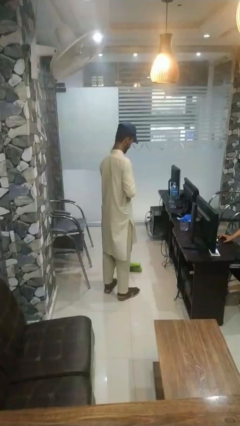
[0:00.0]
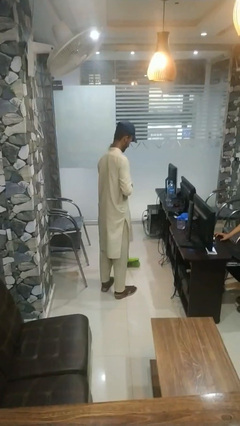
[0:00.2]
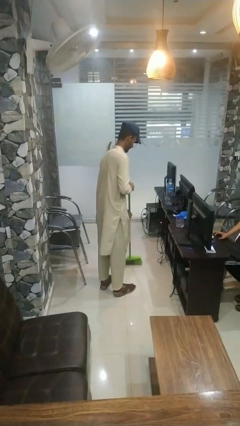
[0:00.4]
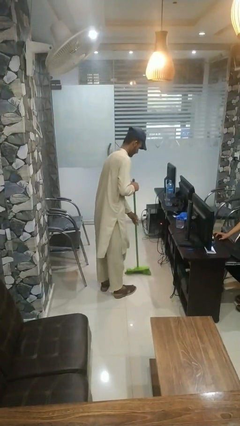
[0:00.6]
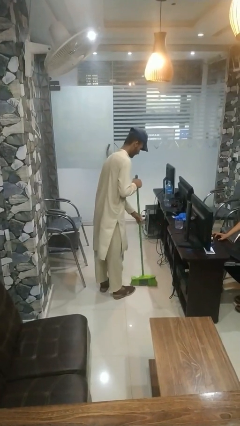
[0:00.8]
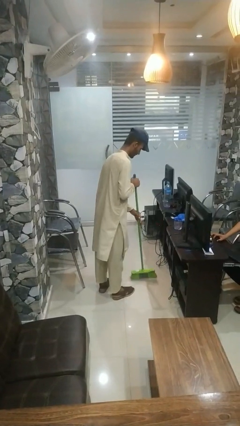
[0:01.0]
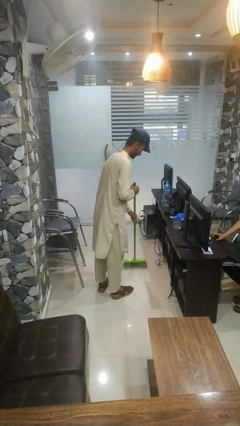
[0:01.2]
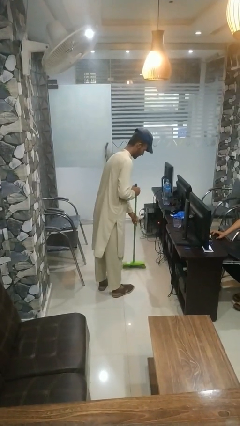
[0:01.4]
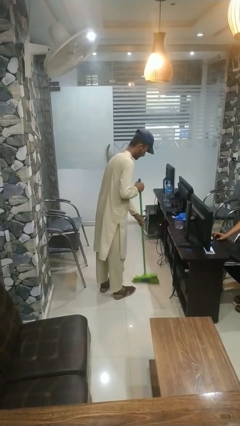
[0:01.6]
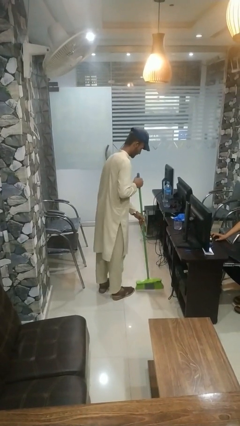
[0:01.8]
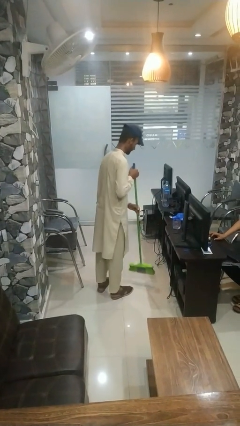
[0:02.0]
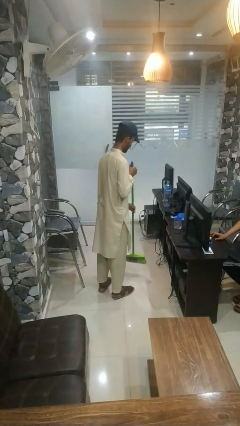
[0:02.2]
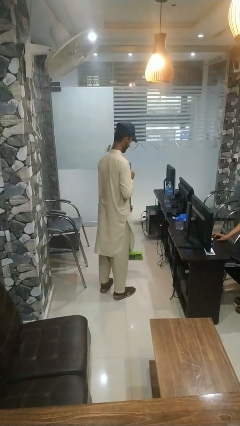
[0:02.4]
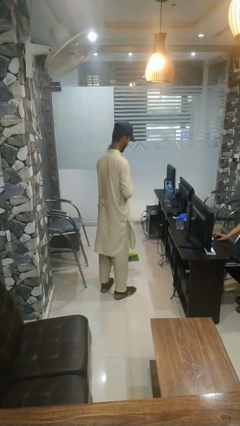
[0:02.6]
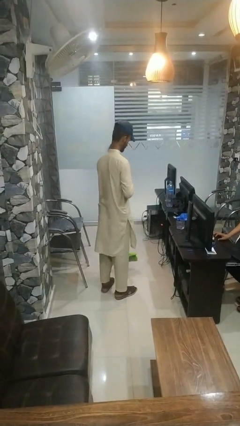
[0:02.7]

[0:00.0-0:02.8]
person sweeps floor

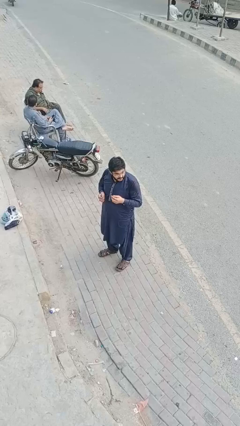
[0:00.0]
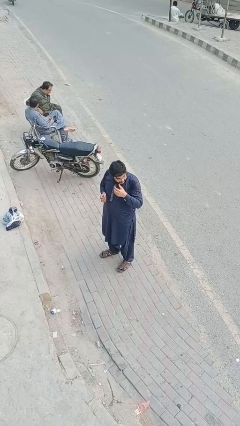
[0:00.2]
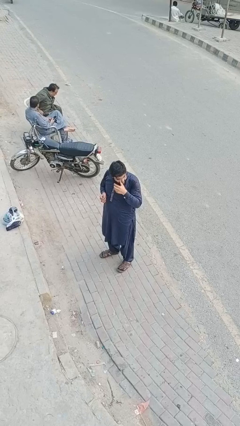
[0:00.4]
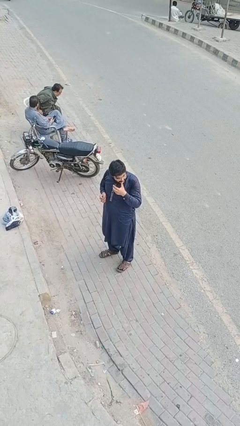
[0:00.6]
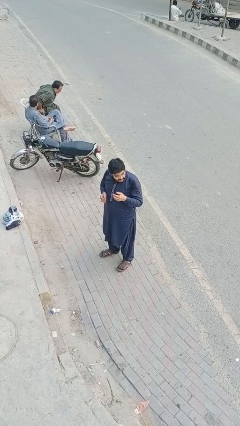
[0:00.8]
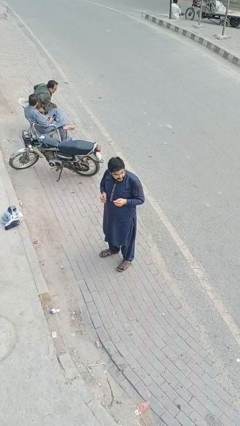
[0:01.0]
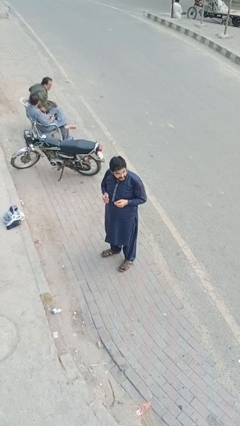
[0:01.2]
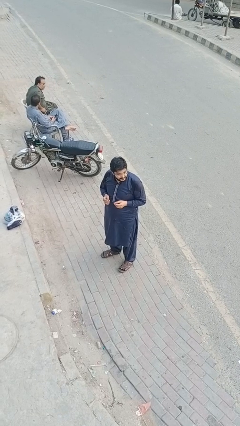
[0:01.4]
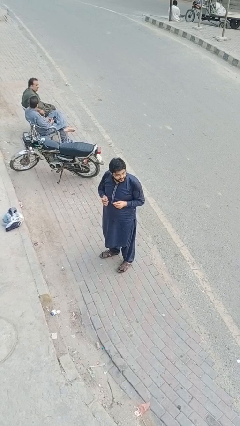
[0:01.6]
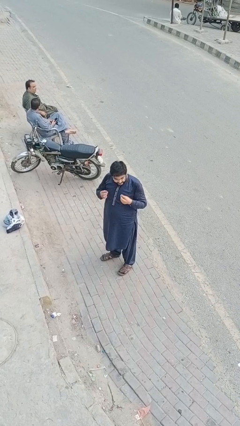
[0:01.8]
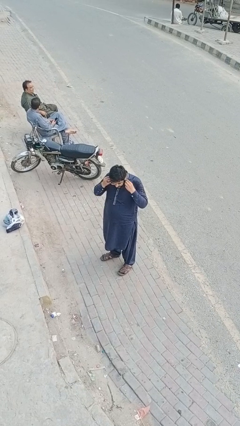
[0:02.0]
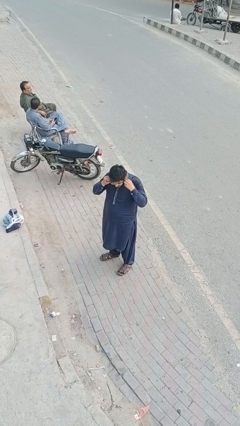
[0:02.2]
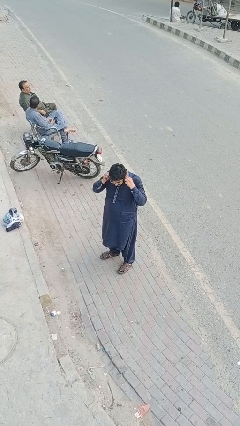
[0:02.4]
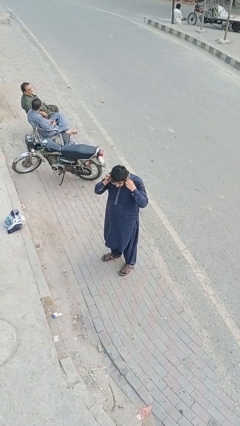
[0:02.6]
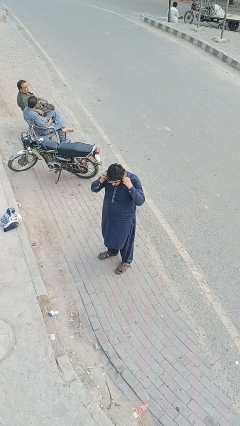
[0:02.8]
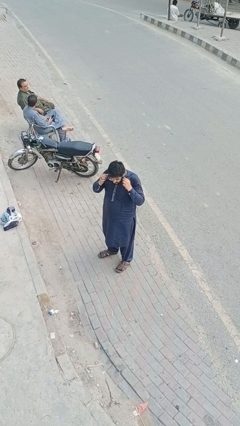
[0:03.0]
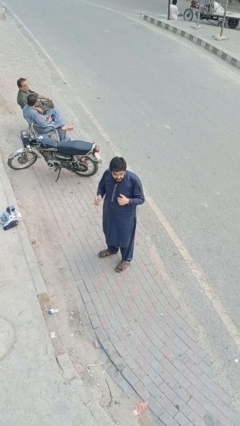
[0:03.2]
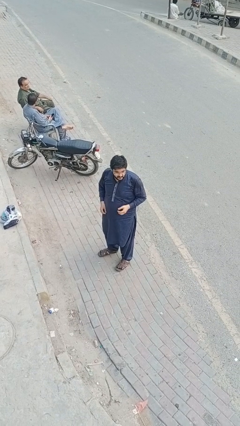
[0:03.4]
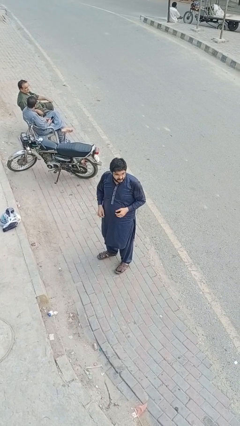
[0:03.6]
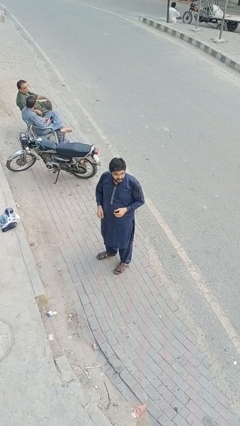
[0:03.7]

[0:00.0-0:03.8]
person puts on headphones

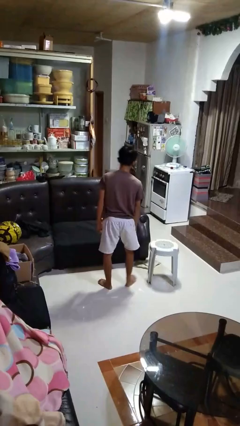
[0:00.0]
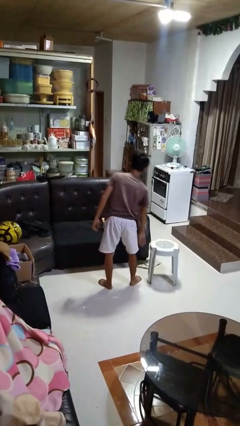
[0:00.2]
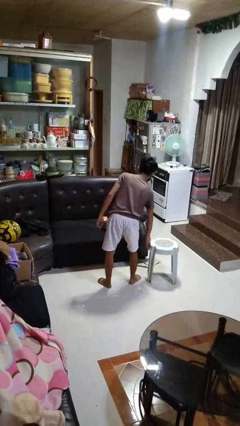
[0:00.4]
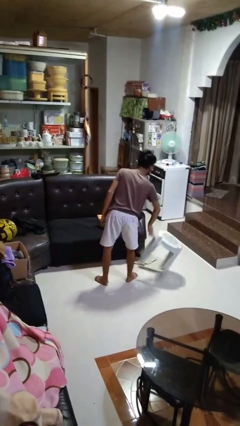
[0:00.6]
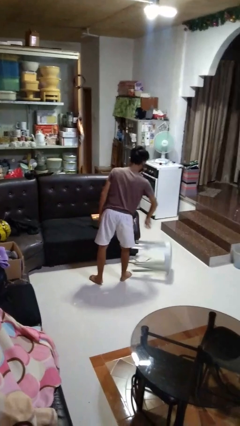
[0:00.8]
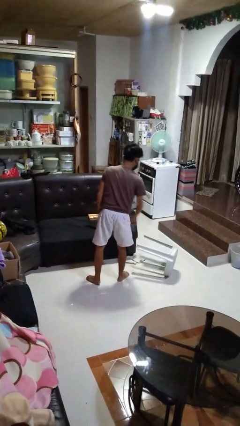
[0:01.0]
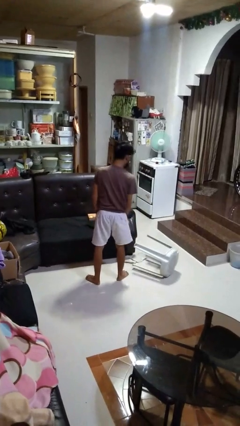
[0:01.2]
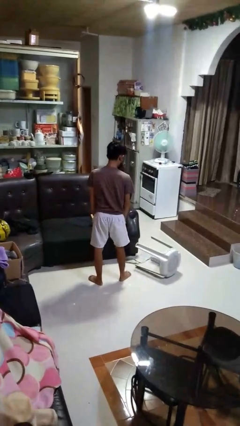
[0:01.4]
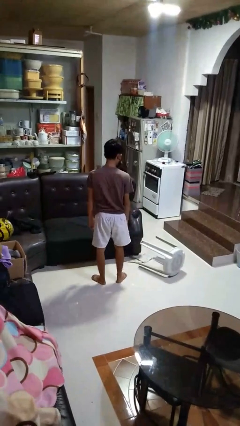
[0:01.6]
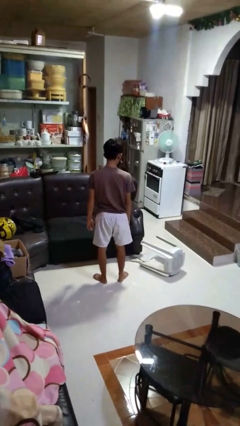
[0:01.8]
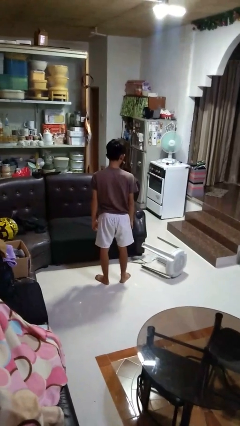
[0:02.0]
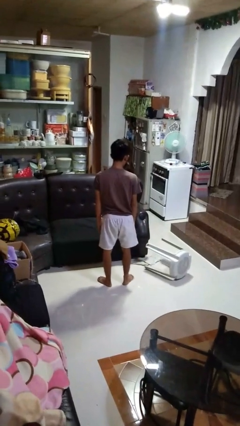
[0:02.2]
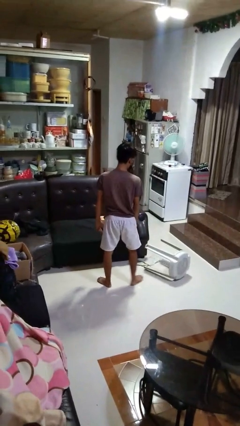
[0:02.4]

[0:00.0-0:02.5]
person knocks over furniture

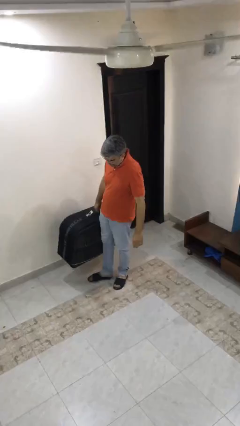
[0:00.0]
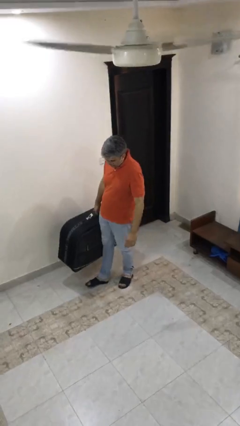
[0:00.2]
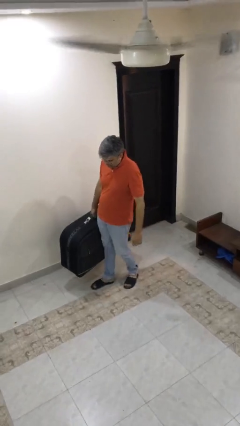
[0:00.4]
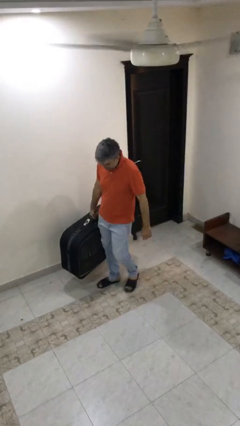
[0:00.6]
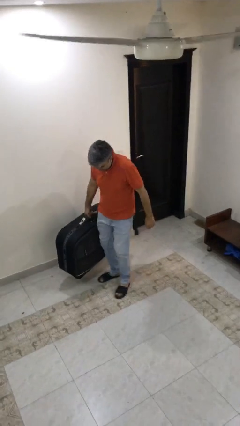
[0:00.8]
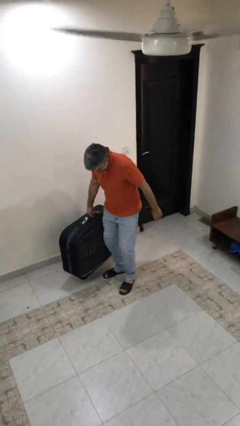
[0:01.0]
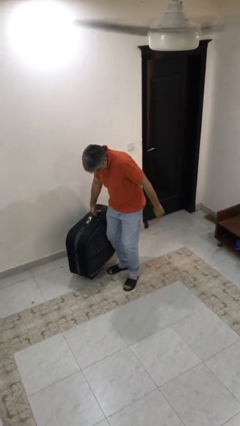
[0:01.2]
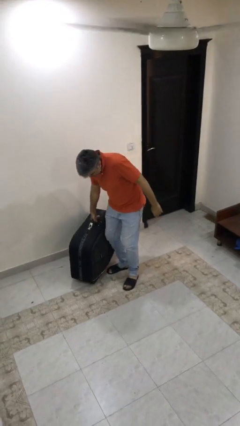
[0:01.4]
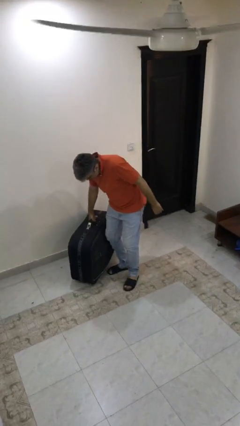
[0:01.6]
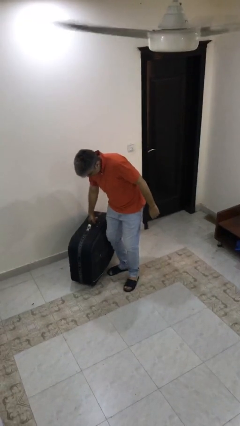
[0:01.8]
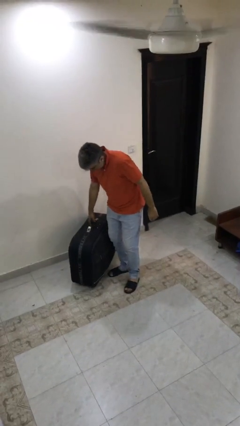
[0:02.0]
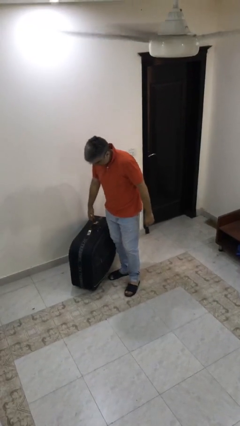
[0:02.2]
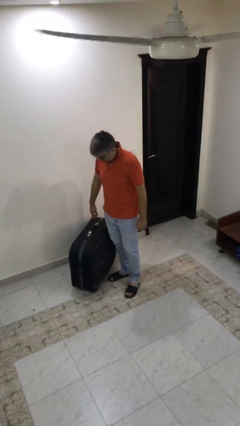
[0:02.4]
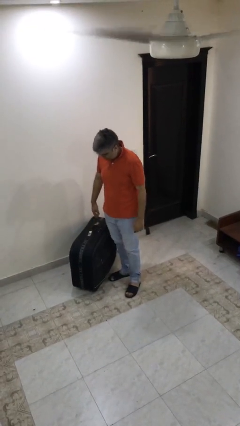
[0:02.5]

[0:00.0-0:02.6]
person puts down object on floor

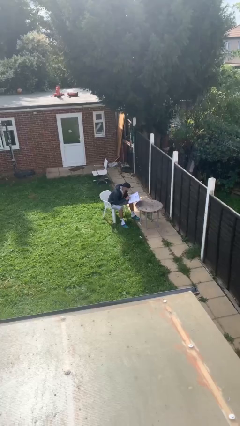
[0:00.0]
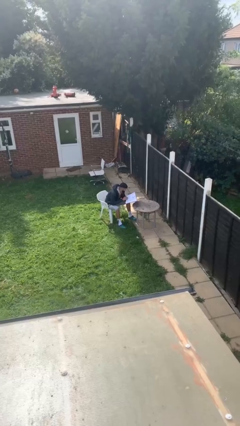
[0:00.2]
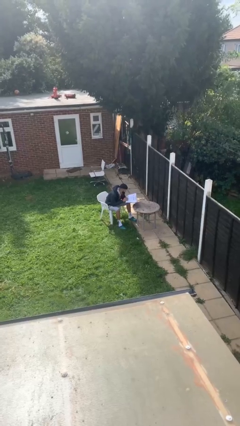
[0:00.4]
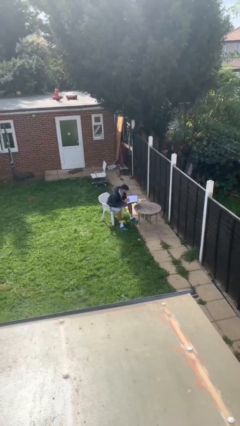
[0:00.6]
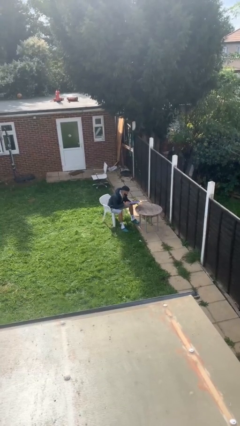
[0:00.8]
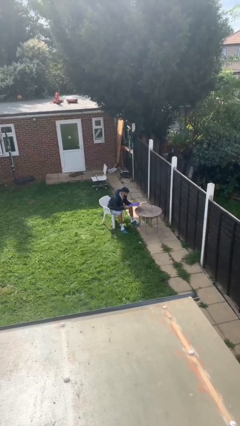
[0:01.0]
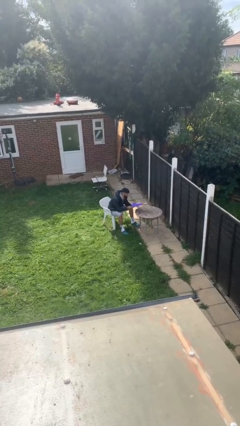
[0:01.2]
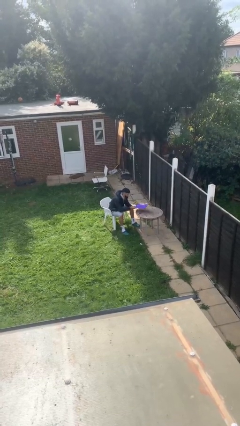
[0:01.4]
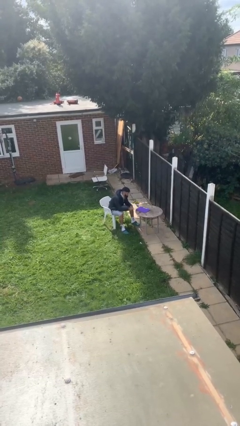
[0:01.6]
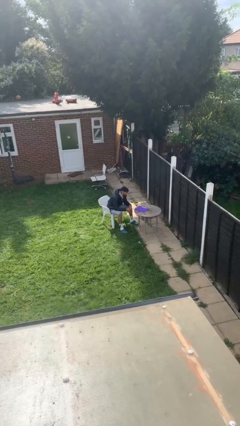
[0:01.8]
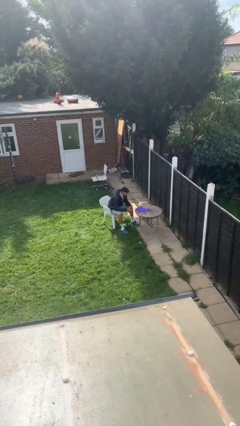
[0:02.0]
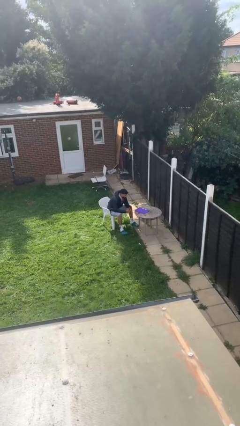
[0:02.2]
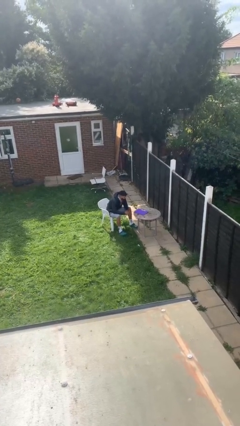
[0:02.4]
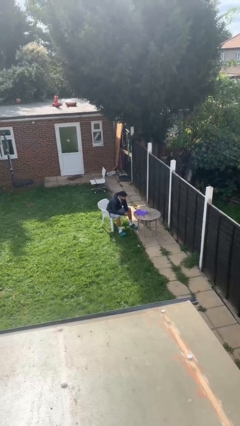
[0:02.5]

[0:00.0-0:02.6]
person puts down object on table

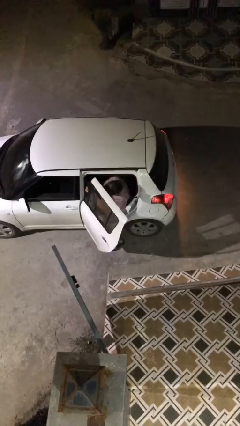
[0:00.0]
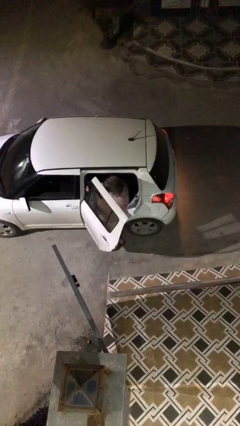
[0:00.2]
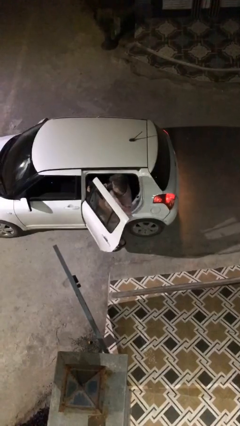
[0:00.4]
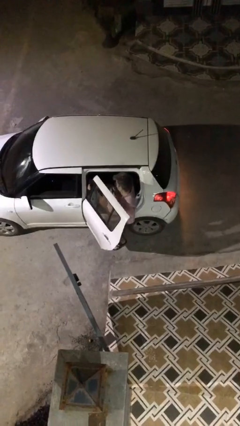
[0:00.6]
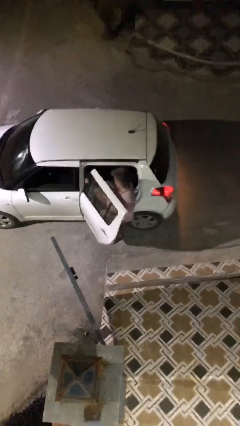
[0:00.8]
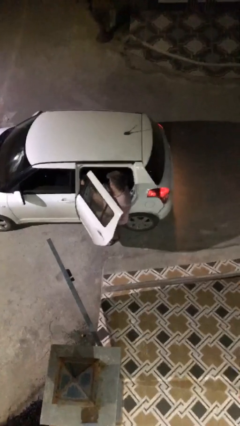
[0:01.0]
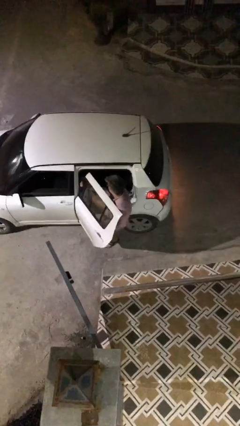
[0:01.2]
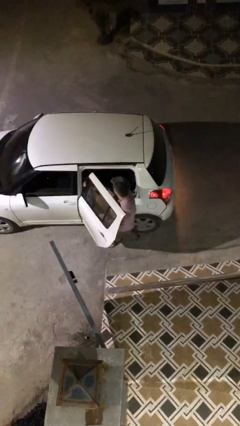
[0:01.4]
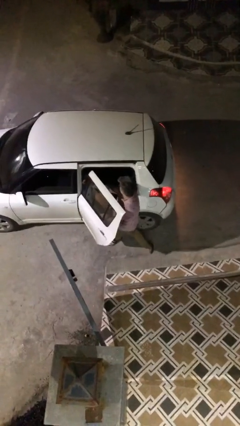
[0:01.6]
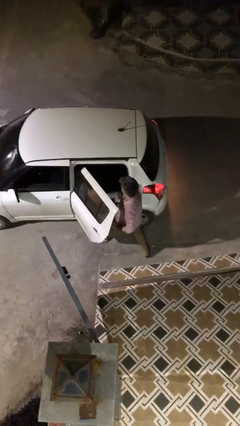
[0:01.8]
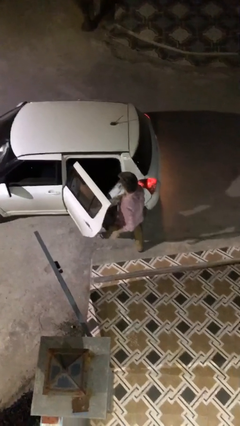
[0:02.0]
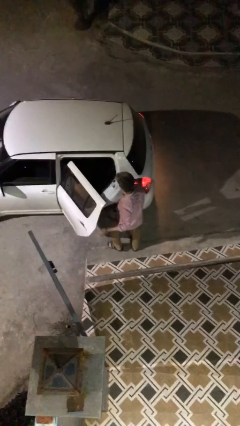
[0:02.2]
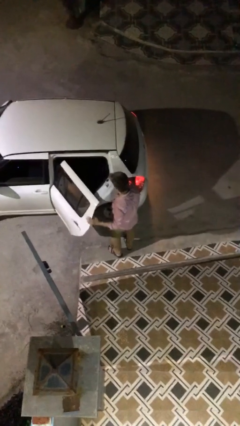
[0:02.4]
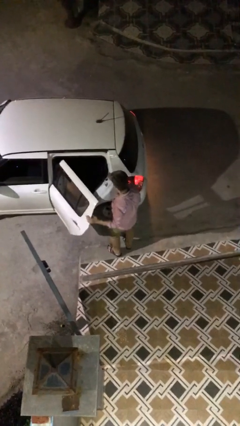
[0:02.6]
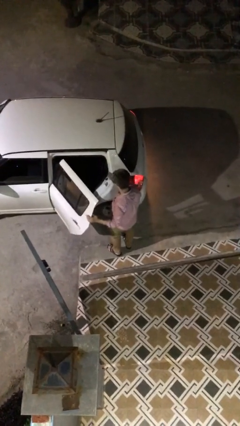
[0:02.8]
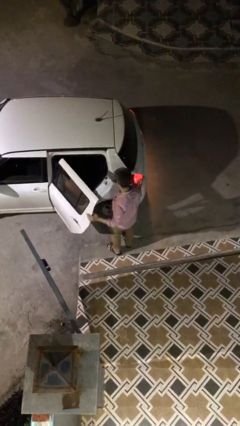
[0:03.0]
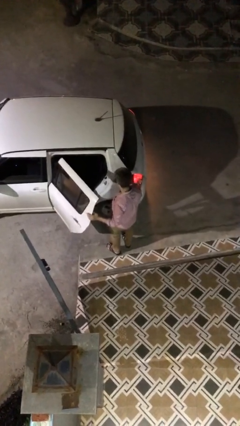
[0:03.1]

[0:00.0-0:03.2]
person exits car

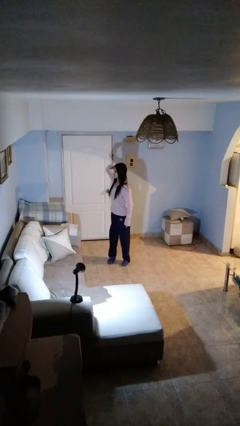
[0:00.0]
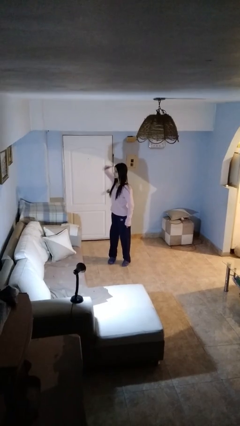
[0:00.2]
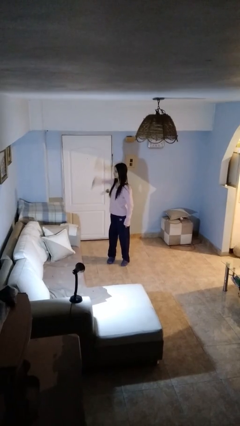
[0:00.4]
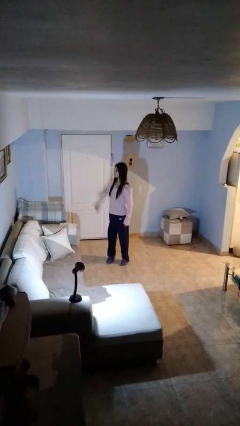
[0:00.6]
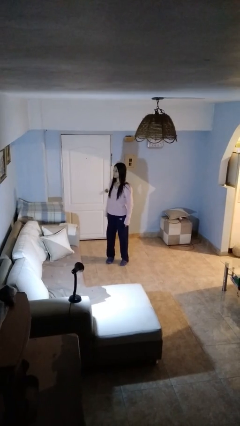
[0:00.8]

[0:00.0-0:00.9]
person salutes
